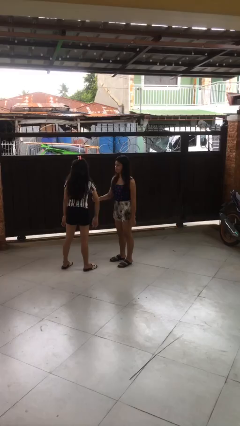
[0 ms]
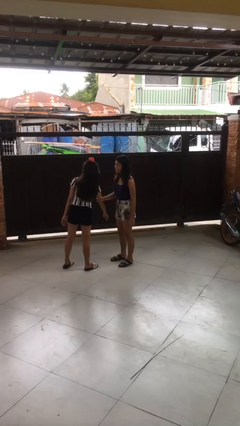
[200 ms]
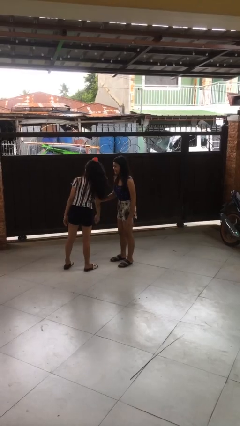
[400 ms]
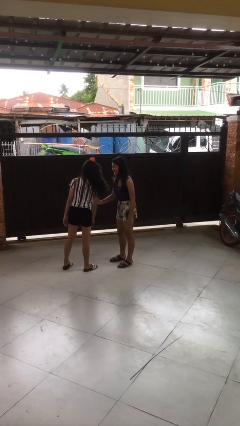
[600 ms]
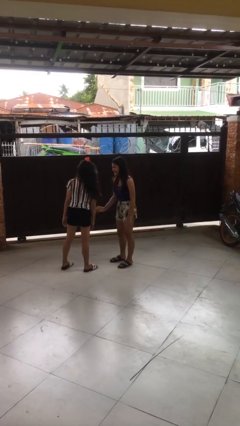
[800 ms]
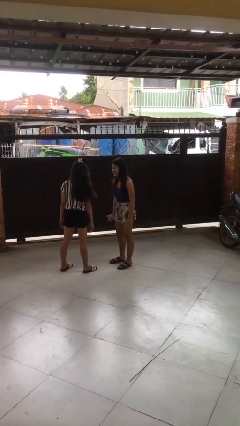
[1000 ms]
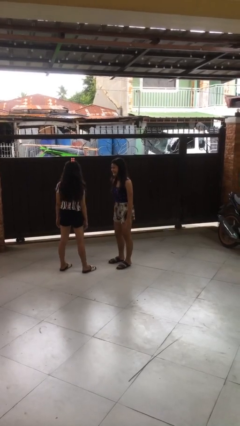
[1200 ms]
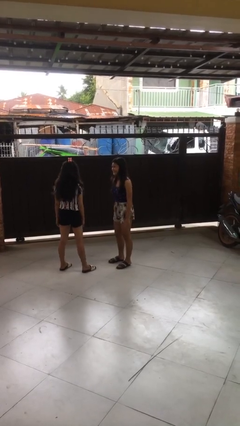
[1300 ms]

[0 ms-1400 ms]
person grabs person by bicep

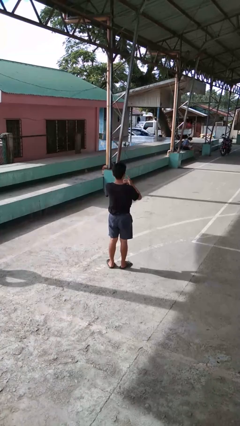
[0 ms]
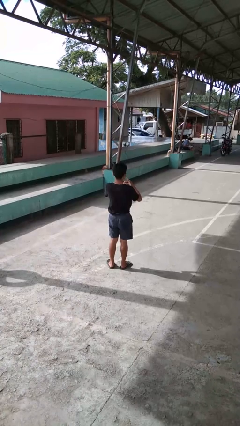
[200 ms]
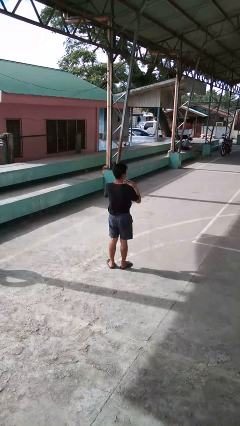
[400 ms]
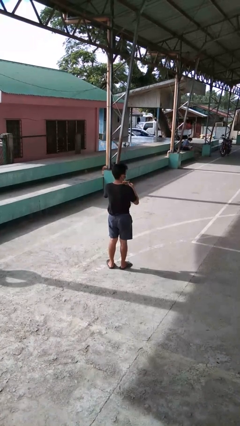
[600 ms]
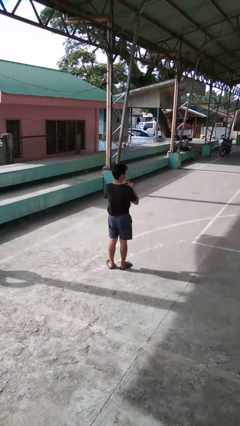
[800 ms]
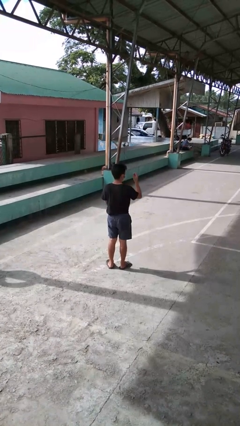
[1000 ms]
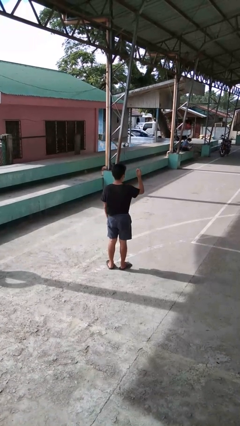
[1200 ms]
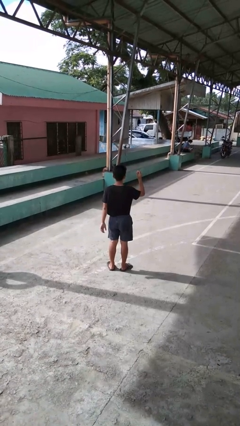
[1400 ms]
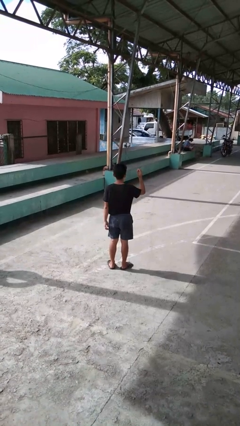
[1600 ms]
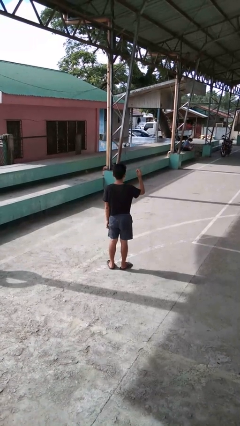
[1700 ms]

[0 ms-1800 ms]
person takes off ring

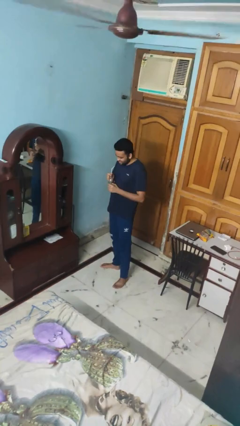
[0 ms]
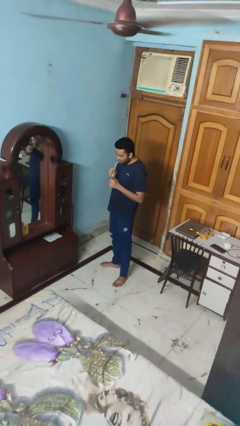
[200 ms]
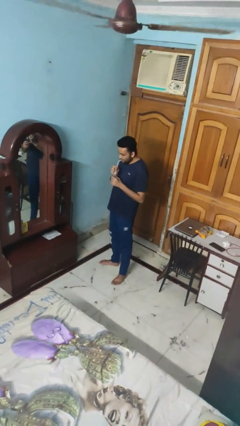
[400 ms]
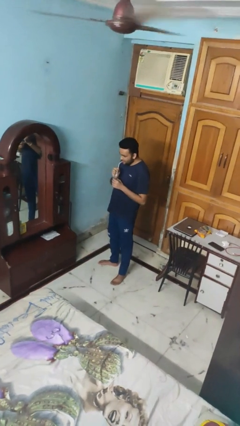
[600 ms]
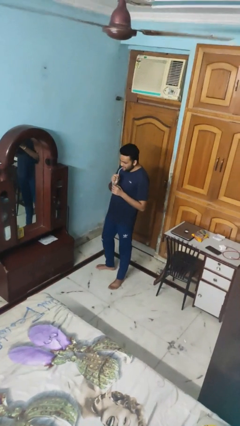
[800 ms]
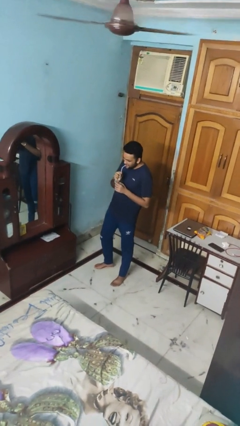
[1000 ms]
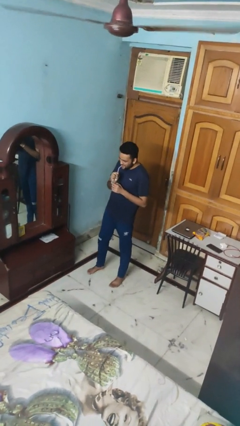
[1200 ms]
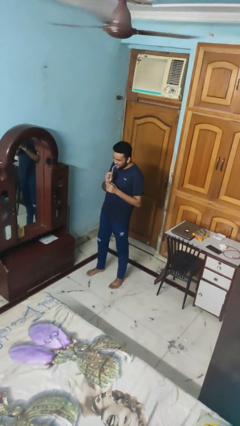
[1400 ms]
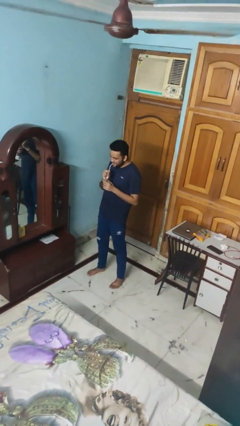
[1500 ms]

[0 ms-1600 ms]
person drinks from straw

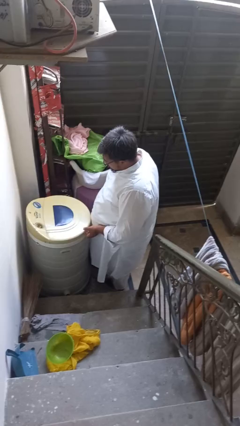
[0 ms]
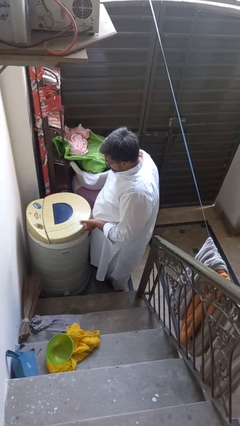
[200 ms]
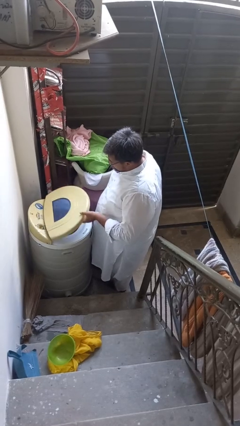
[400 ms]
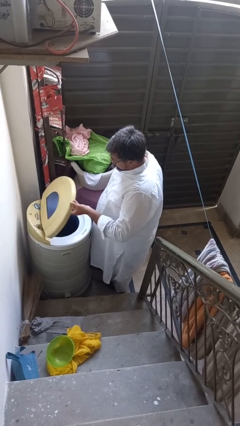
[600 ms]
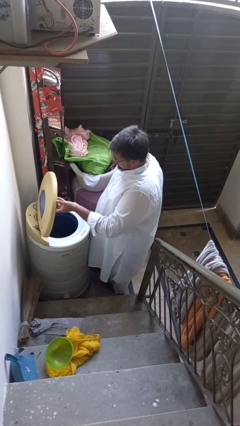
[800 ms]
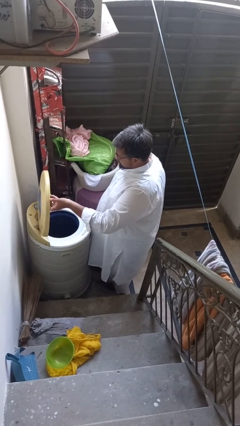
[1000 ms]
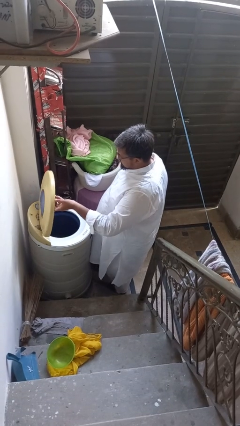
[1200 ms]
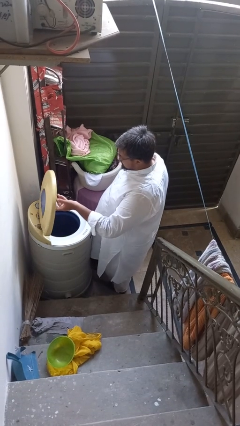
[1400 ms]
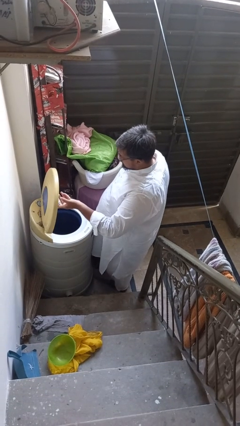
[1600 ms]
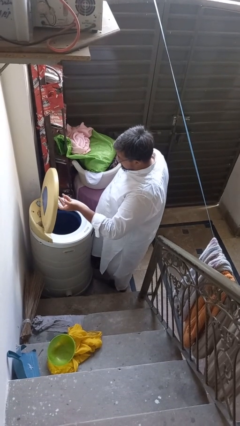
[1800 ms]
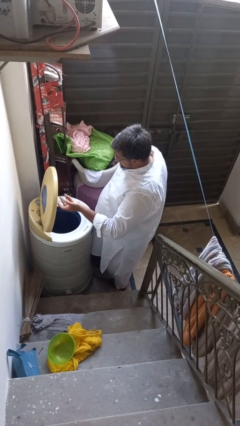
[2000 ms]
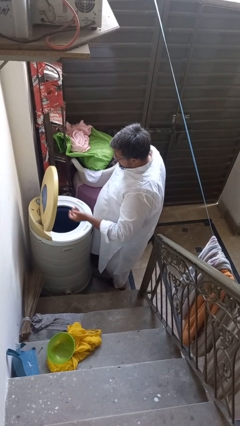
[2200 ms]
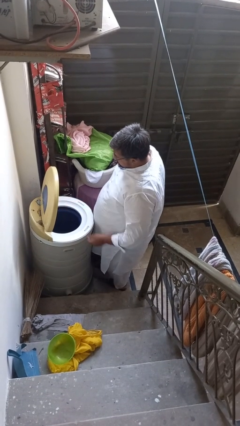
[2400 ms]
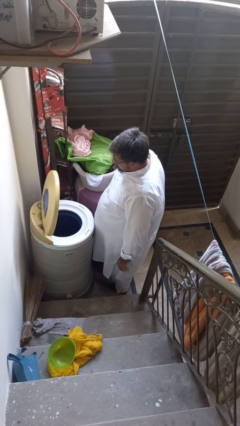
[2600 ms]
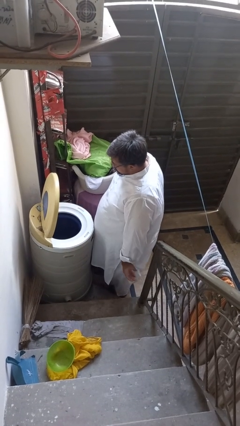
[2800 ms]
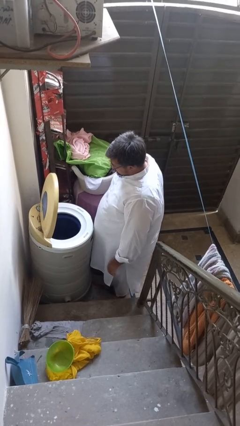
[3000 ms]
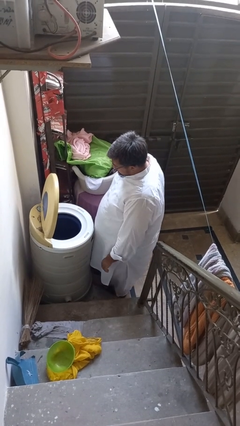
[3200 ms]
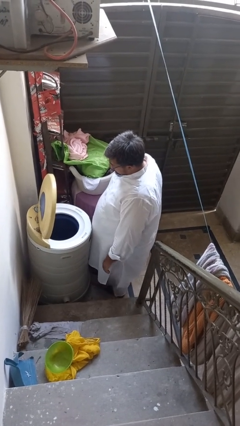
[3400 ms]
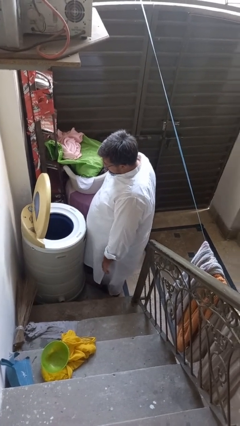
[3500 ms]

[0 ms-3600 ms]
person opens clothes washer

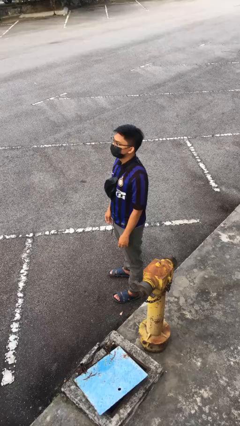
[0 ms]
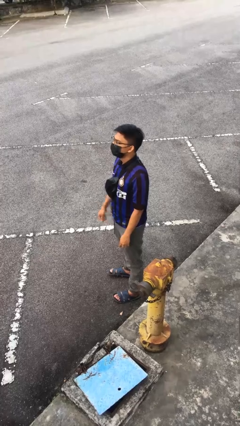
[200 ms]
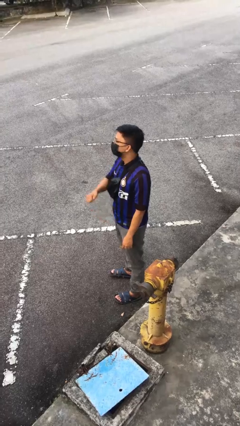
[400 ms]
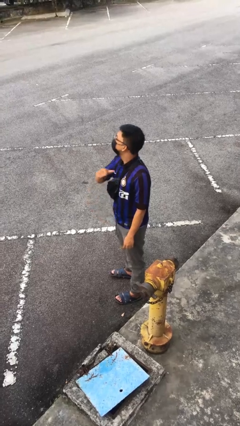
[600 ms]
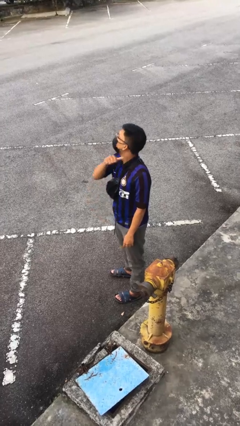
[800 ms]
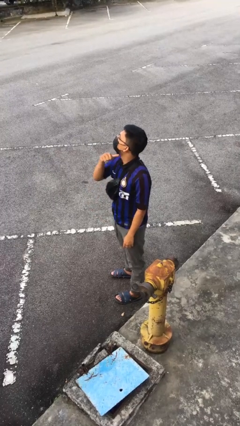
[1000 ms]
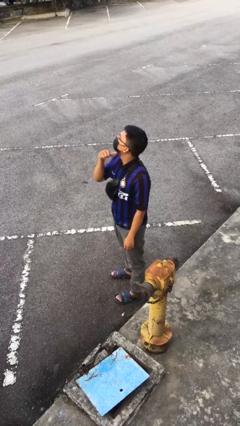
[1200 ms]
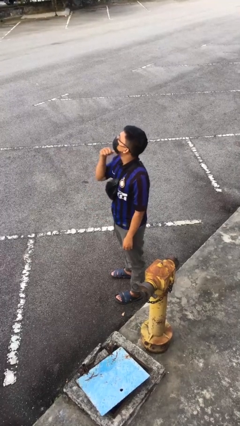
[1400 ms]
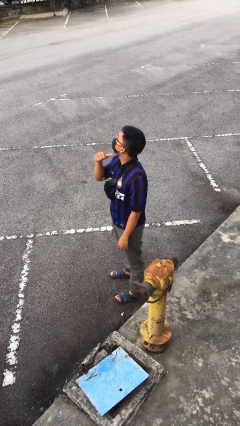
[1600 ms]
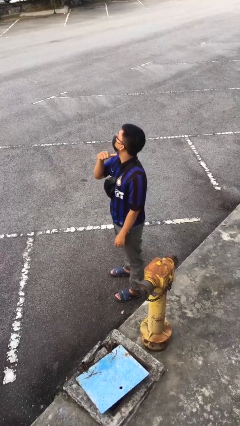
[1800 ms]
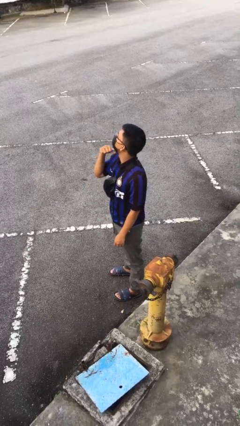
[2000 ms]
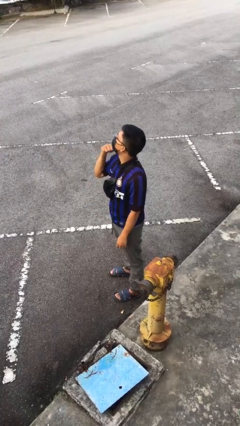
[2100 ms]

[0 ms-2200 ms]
person gestures cut

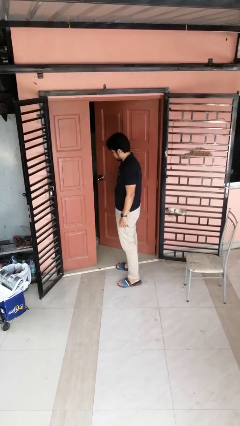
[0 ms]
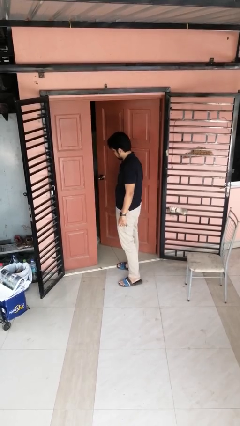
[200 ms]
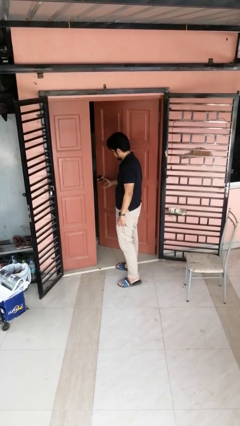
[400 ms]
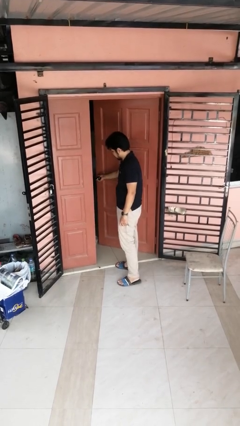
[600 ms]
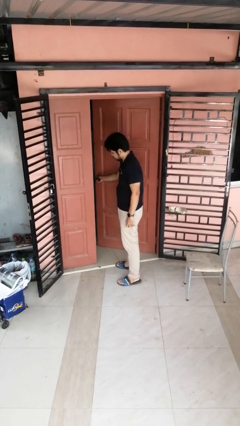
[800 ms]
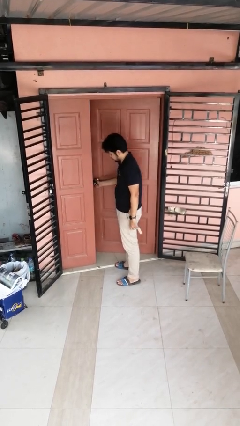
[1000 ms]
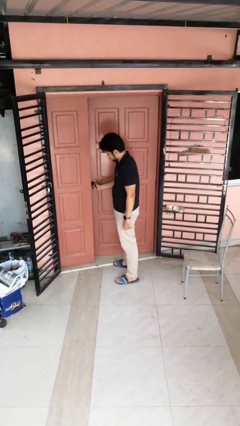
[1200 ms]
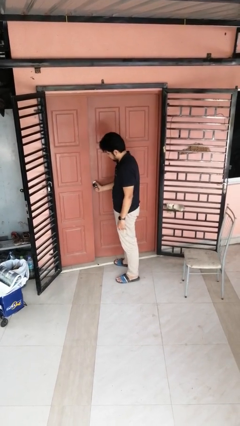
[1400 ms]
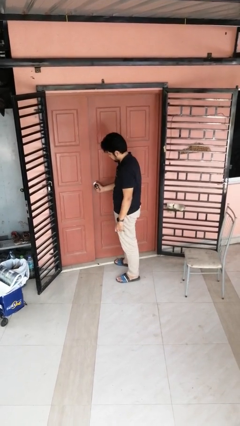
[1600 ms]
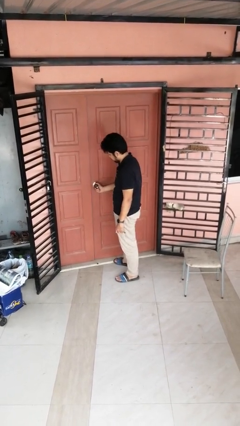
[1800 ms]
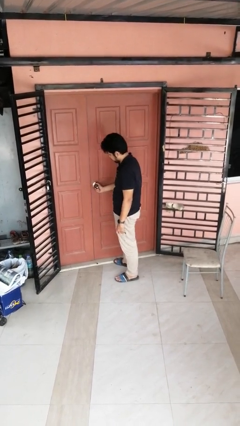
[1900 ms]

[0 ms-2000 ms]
person closes facility door

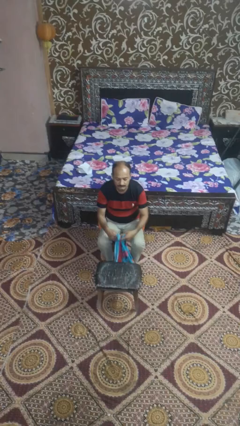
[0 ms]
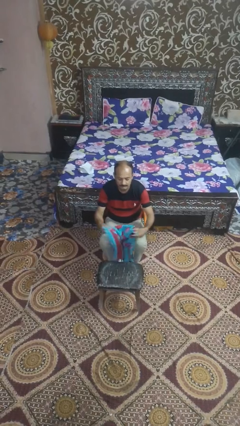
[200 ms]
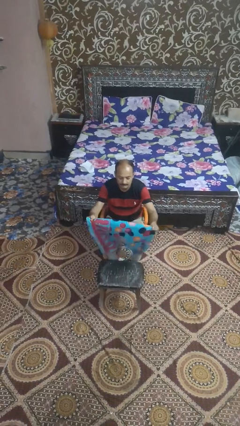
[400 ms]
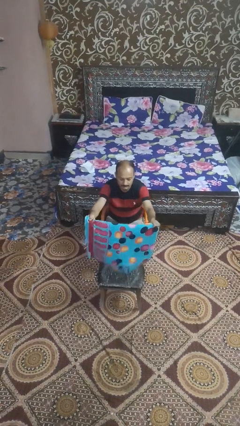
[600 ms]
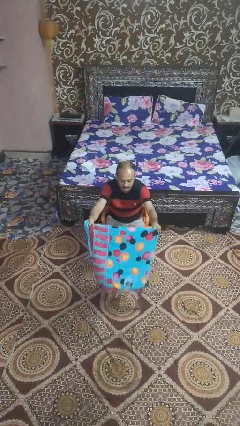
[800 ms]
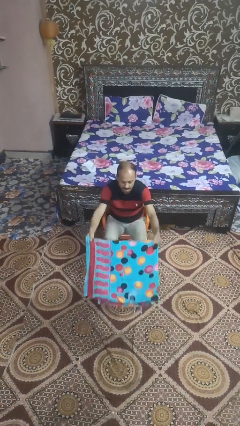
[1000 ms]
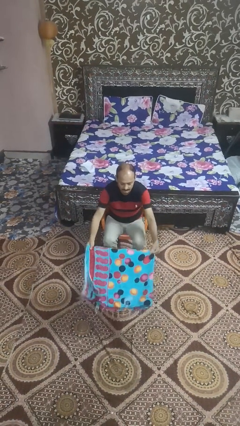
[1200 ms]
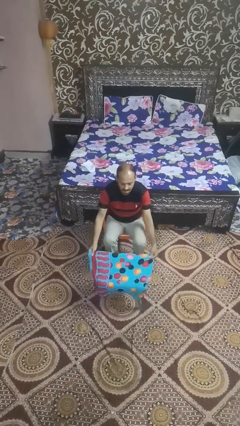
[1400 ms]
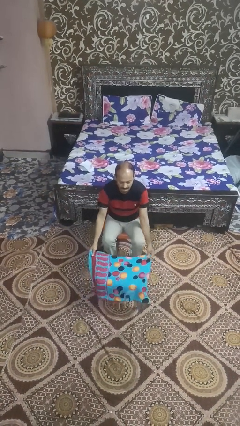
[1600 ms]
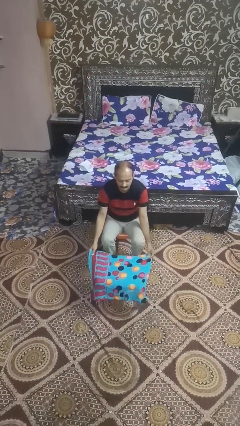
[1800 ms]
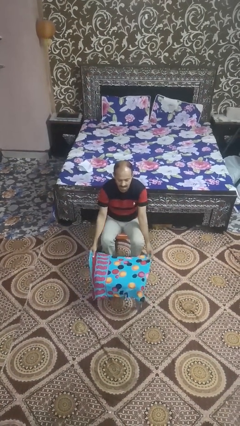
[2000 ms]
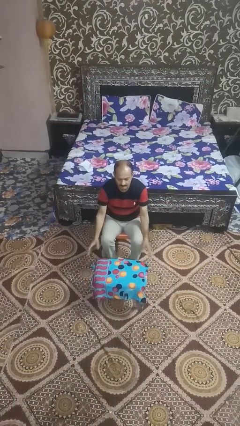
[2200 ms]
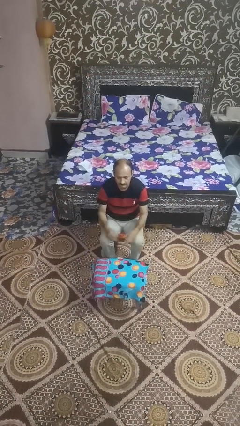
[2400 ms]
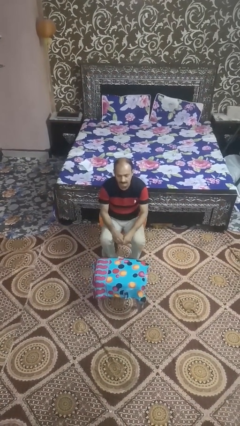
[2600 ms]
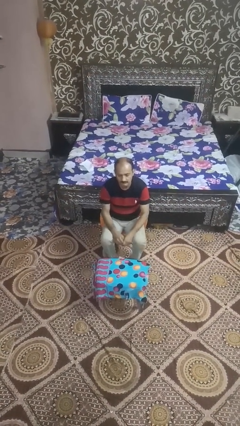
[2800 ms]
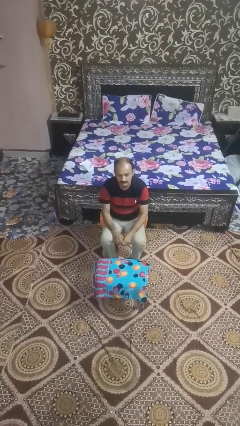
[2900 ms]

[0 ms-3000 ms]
person spreads tablecloth

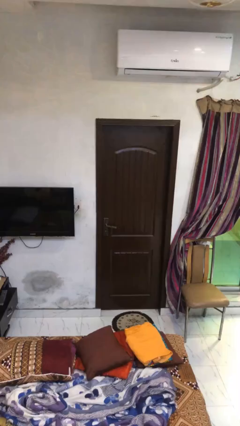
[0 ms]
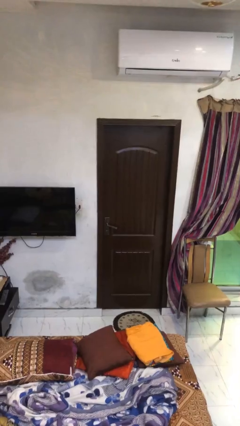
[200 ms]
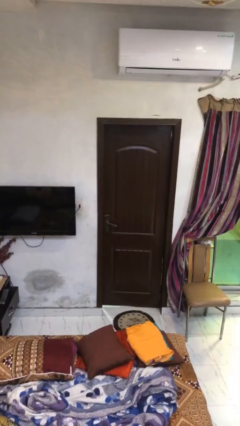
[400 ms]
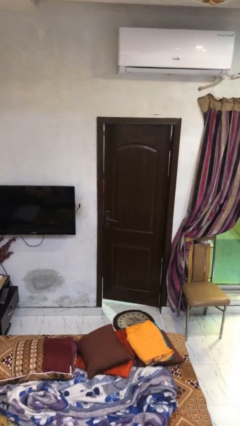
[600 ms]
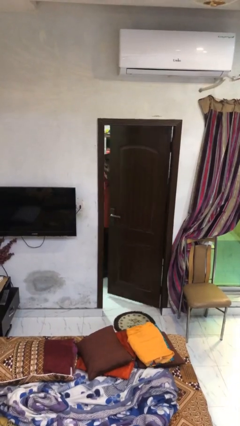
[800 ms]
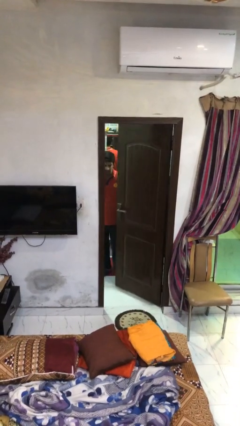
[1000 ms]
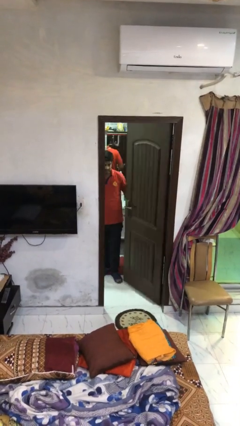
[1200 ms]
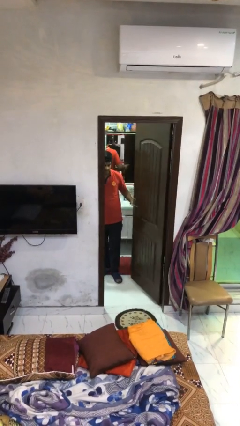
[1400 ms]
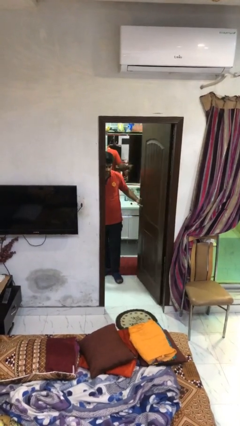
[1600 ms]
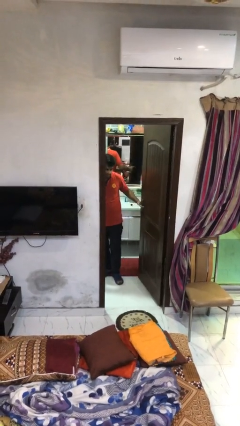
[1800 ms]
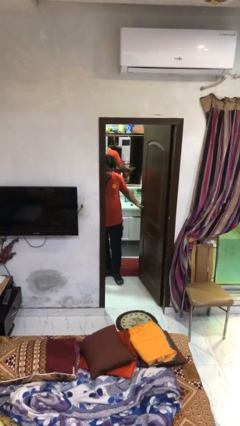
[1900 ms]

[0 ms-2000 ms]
person opens facility door
